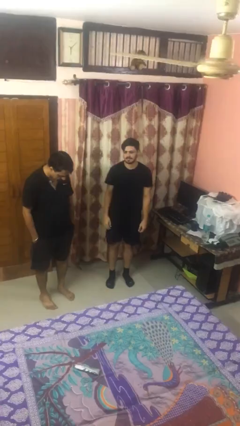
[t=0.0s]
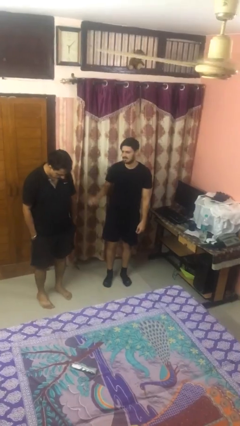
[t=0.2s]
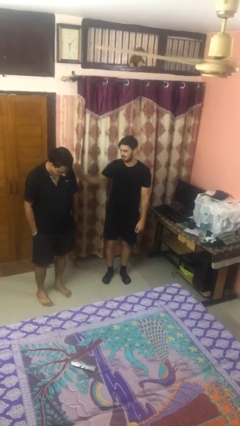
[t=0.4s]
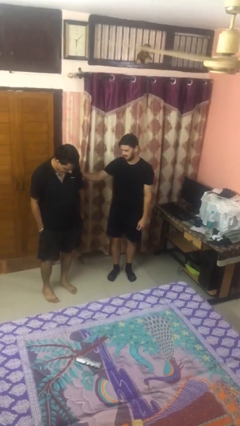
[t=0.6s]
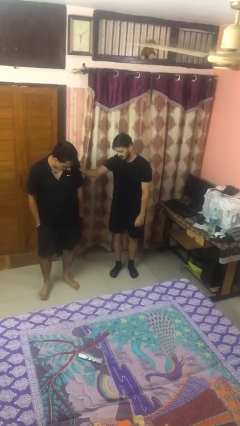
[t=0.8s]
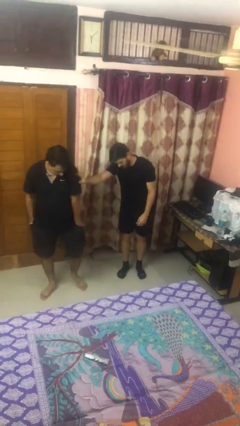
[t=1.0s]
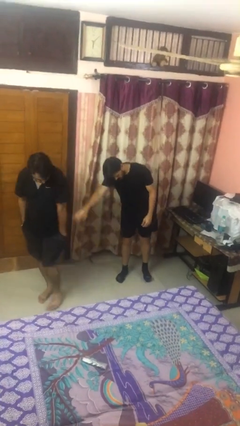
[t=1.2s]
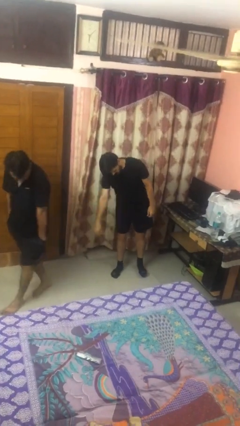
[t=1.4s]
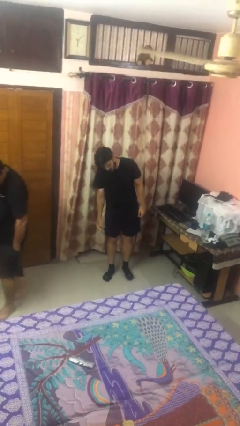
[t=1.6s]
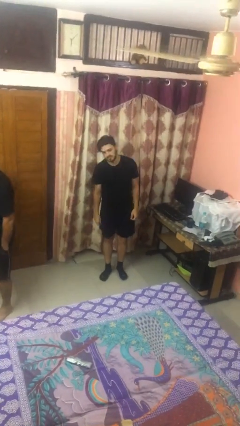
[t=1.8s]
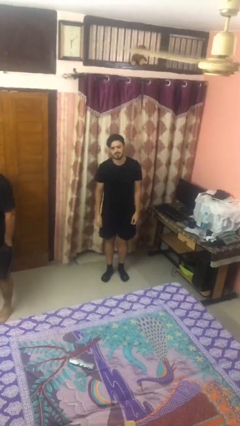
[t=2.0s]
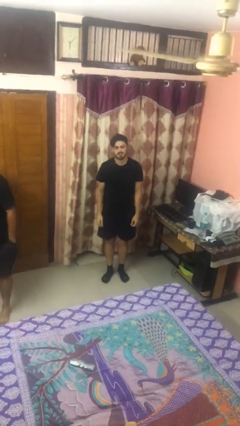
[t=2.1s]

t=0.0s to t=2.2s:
person shoves person

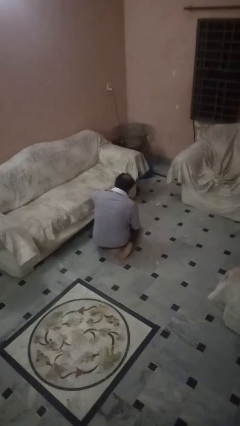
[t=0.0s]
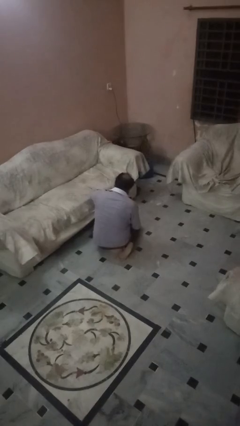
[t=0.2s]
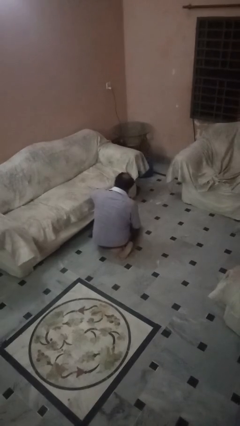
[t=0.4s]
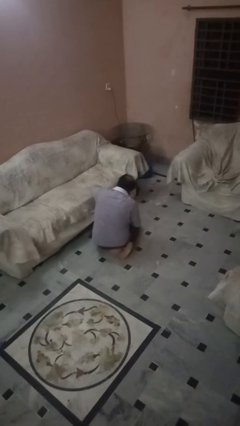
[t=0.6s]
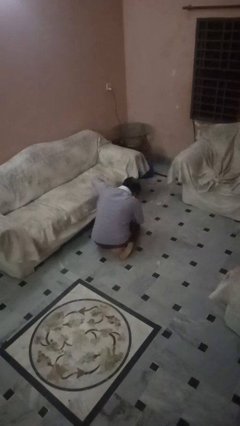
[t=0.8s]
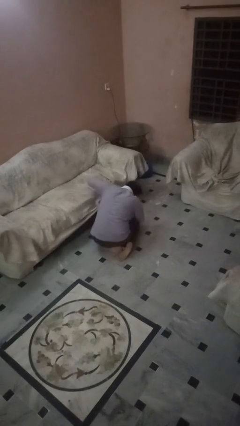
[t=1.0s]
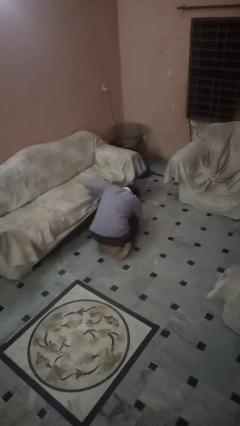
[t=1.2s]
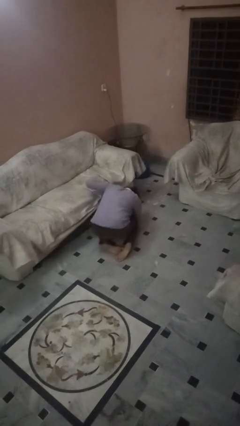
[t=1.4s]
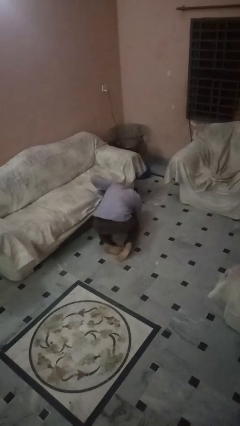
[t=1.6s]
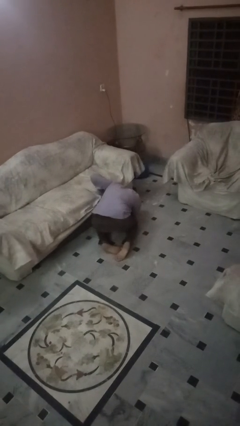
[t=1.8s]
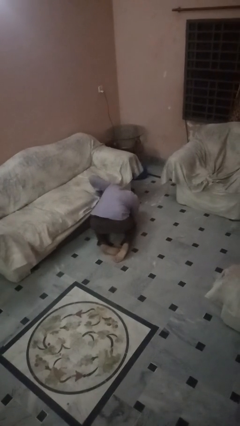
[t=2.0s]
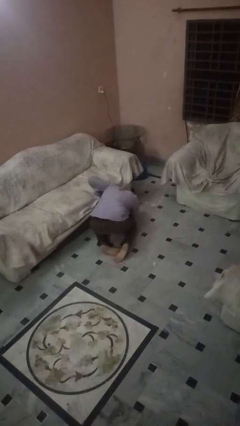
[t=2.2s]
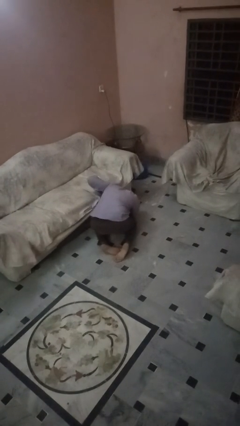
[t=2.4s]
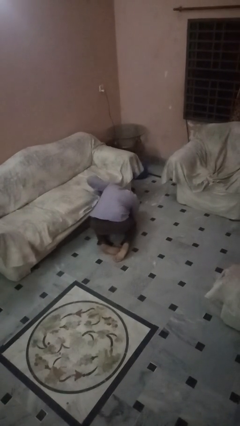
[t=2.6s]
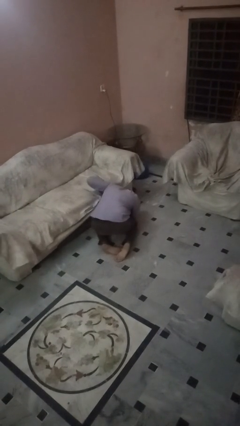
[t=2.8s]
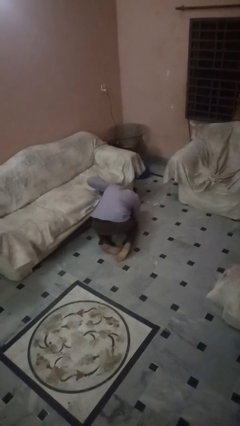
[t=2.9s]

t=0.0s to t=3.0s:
person searches under couch

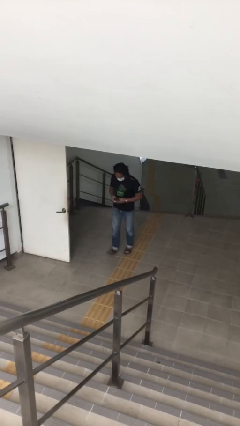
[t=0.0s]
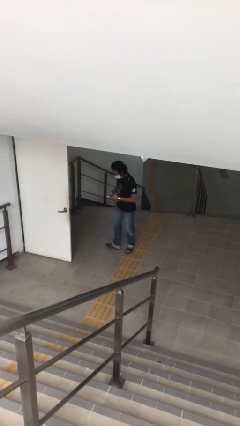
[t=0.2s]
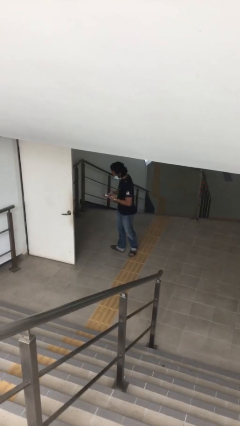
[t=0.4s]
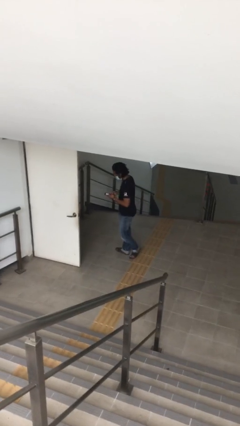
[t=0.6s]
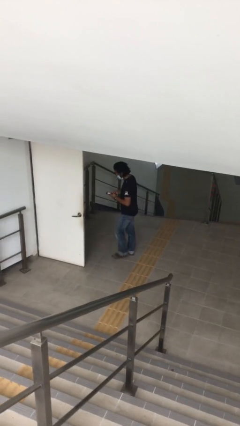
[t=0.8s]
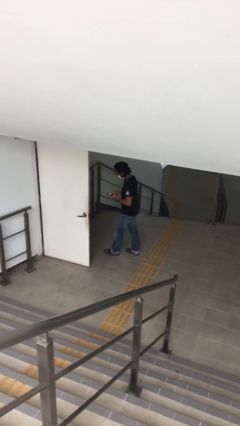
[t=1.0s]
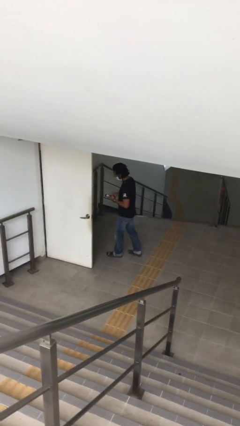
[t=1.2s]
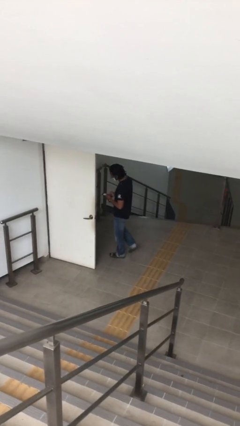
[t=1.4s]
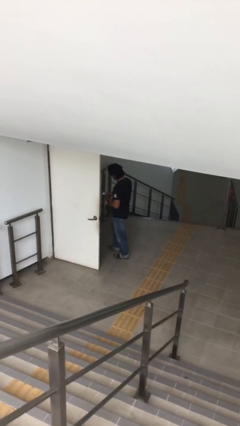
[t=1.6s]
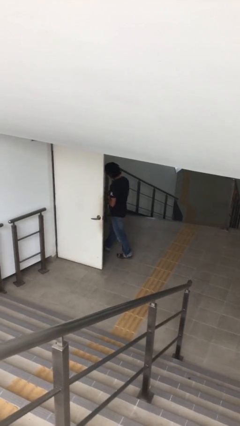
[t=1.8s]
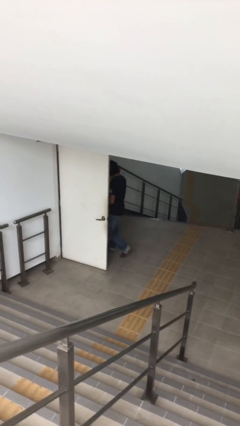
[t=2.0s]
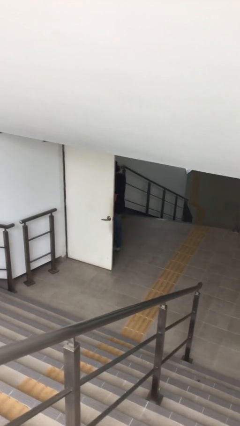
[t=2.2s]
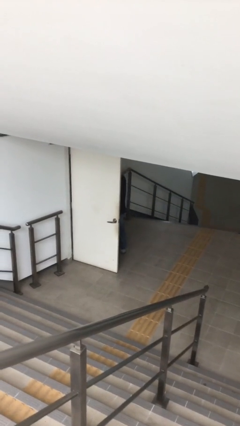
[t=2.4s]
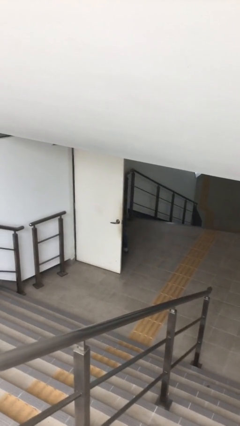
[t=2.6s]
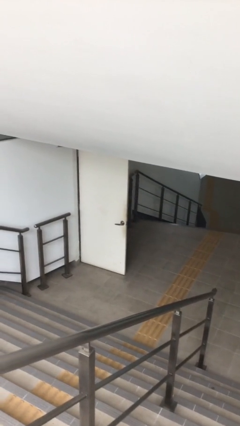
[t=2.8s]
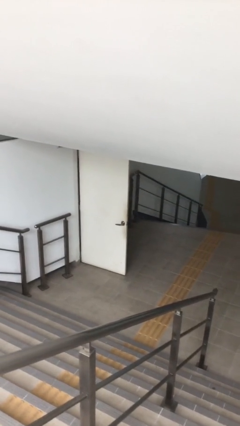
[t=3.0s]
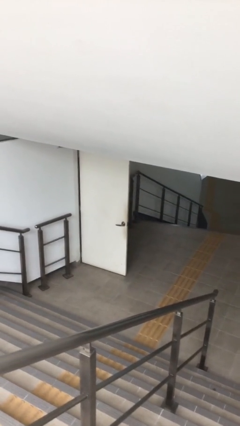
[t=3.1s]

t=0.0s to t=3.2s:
person exits scene through structure

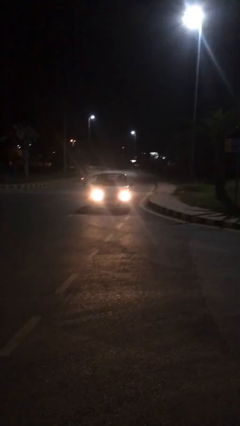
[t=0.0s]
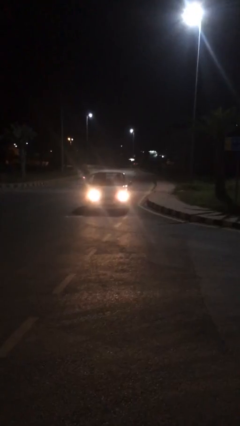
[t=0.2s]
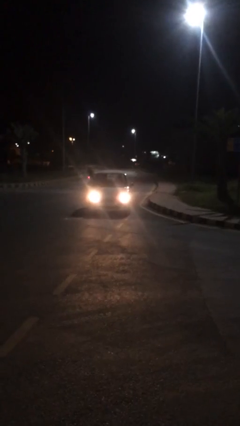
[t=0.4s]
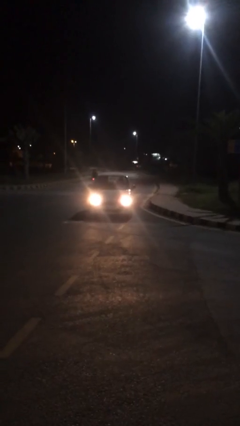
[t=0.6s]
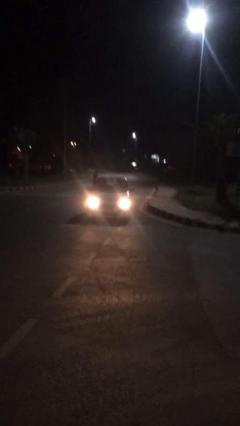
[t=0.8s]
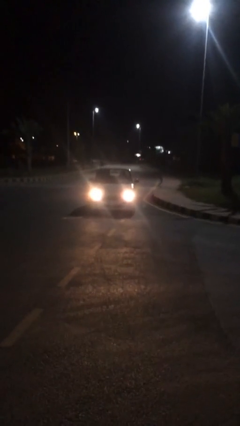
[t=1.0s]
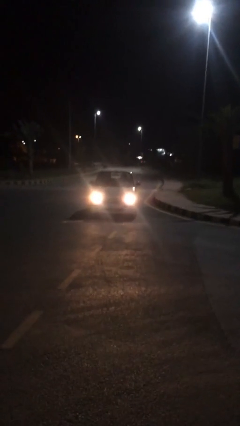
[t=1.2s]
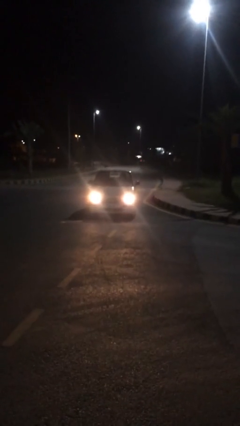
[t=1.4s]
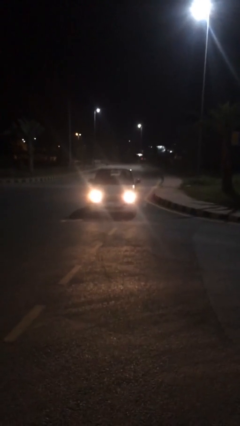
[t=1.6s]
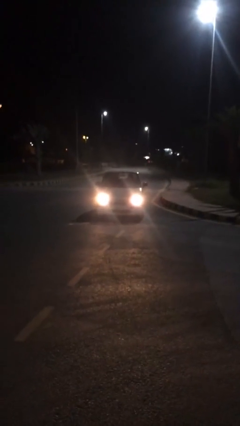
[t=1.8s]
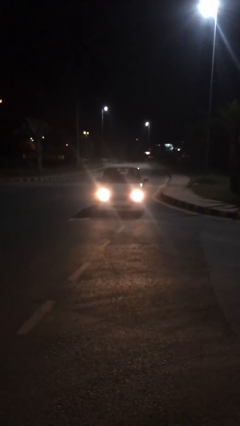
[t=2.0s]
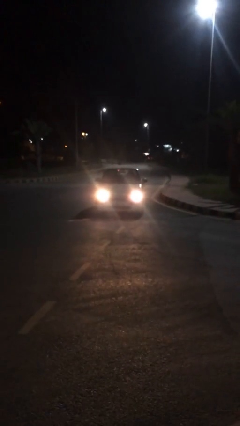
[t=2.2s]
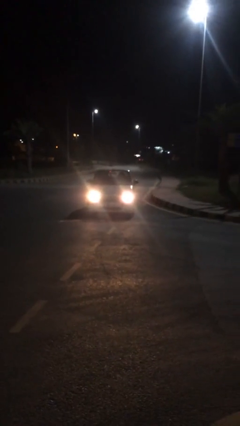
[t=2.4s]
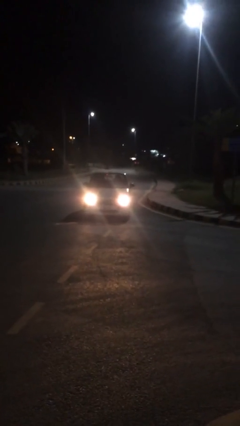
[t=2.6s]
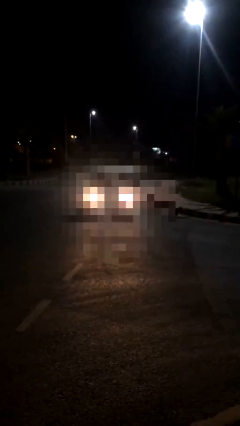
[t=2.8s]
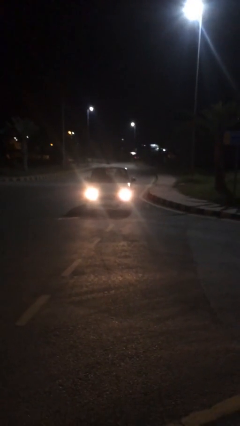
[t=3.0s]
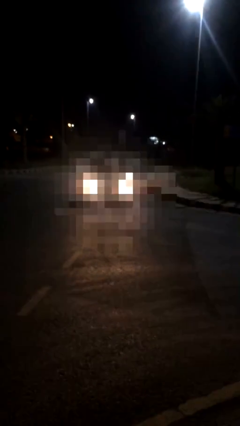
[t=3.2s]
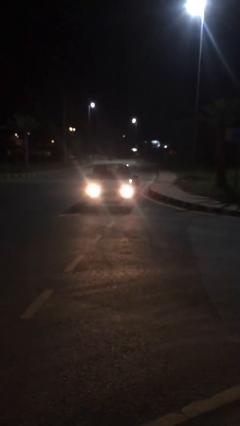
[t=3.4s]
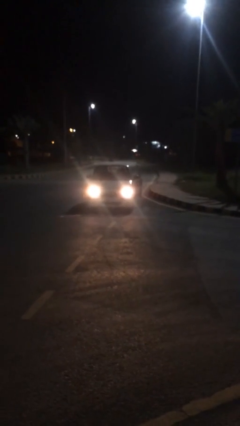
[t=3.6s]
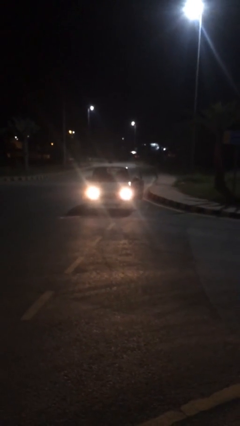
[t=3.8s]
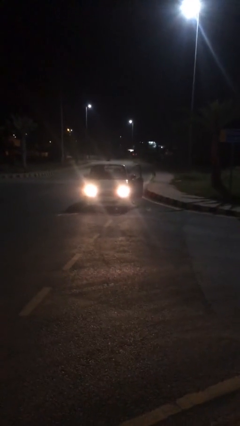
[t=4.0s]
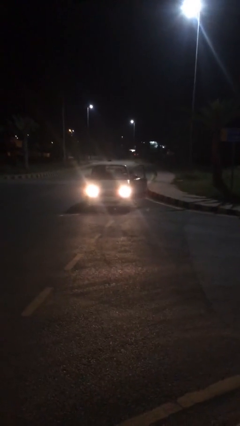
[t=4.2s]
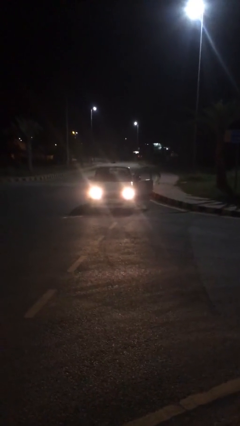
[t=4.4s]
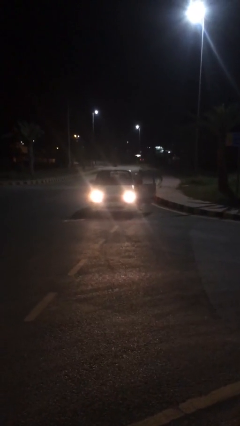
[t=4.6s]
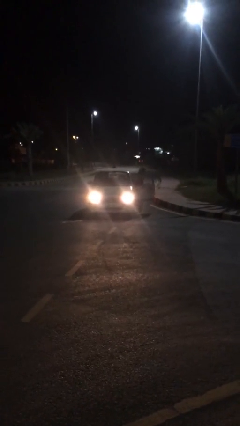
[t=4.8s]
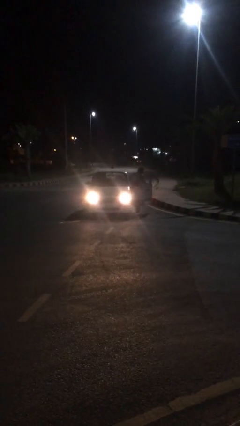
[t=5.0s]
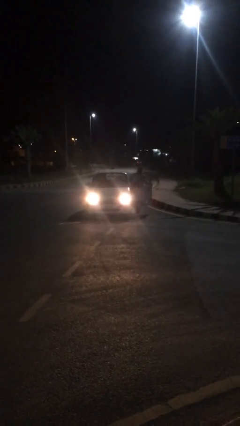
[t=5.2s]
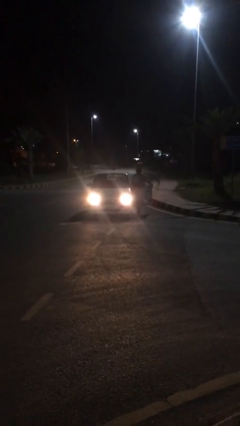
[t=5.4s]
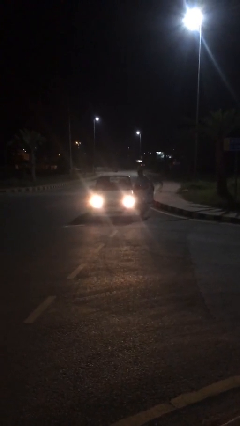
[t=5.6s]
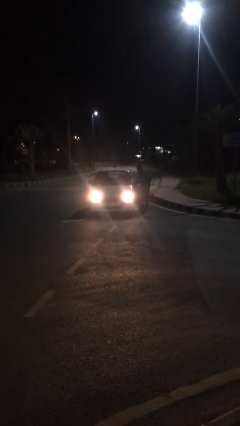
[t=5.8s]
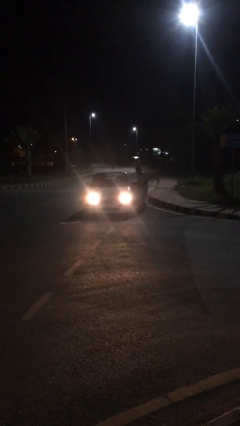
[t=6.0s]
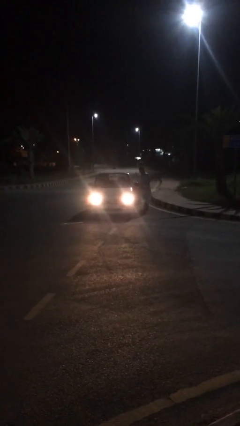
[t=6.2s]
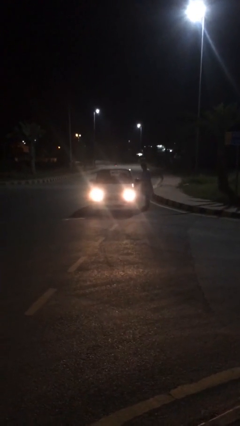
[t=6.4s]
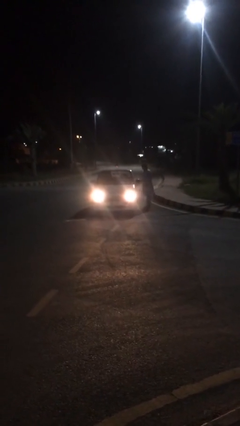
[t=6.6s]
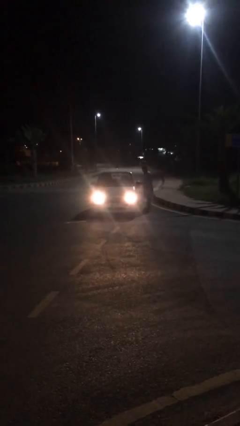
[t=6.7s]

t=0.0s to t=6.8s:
car drops off person

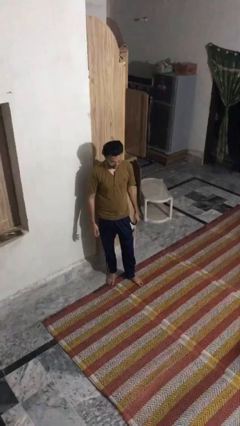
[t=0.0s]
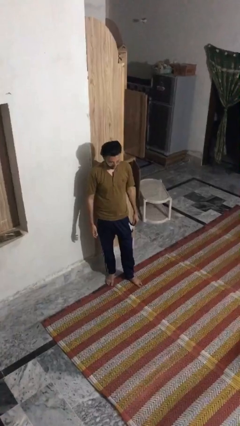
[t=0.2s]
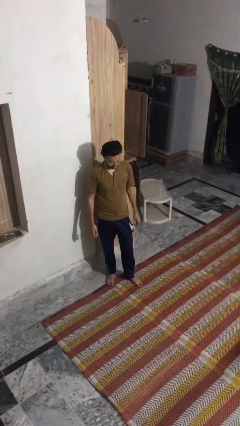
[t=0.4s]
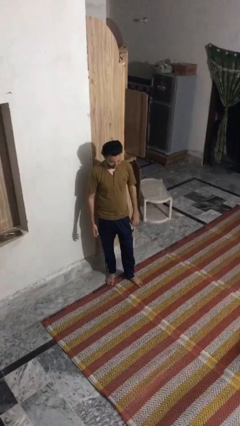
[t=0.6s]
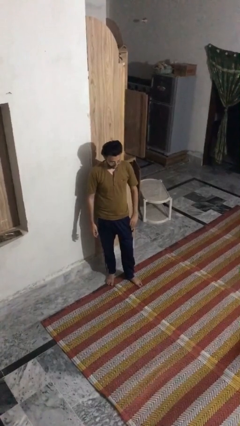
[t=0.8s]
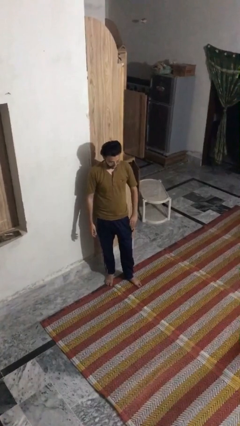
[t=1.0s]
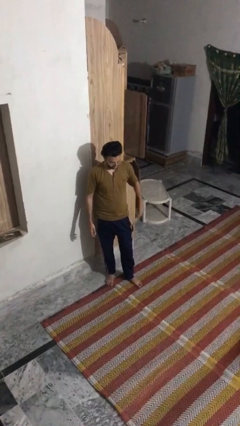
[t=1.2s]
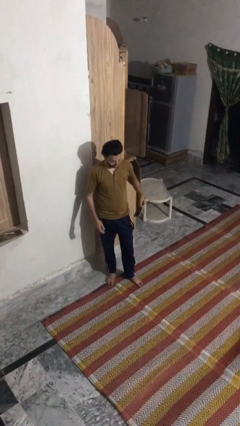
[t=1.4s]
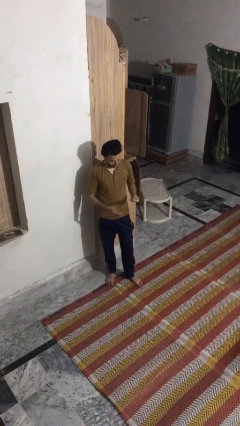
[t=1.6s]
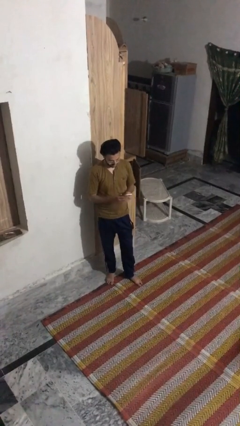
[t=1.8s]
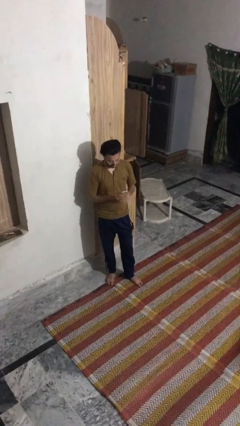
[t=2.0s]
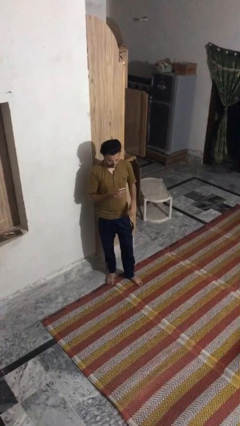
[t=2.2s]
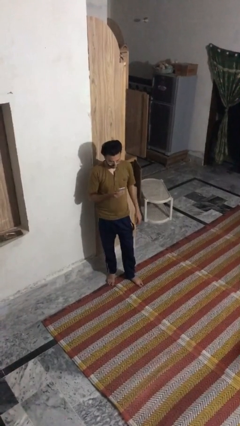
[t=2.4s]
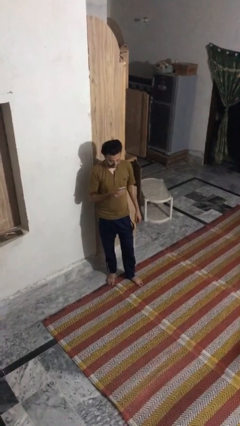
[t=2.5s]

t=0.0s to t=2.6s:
person takes phone from pocket
